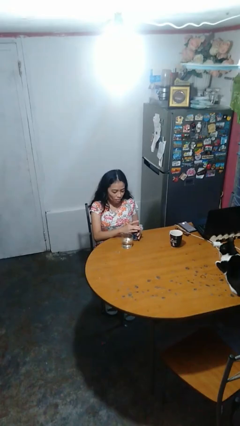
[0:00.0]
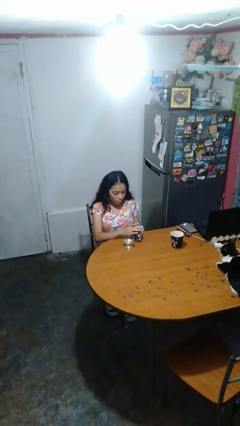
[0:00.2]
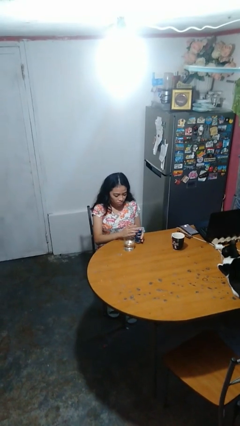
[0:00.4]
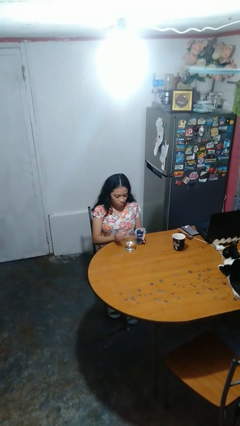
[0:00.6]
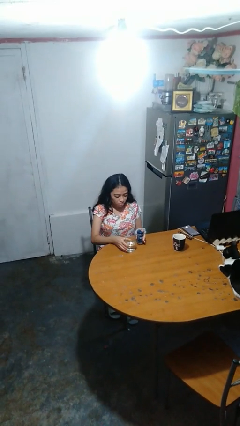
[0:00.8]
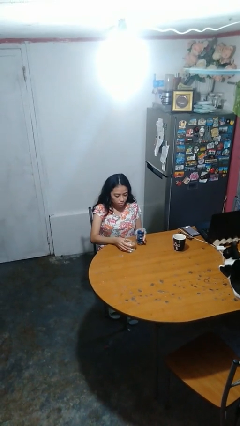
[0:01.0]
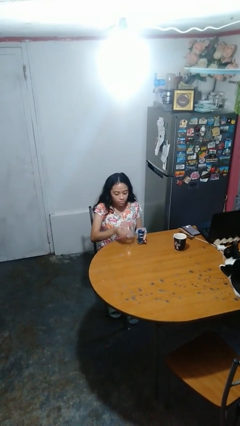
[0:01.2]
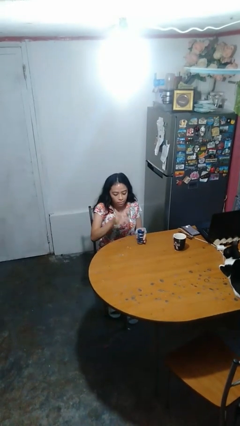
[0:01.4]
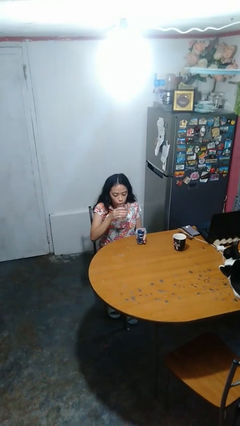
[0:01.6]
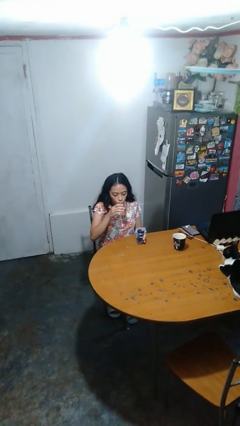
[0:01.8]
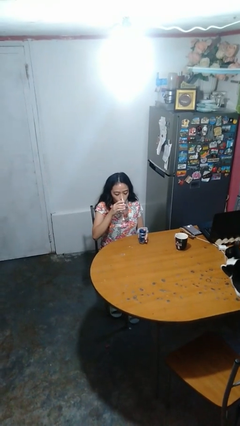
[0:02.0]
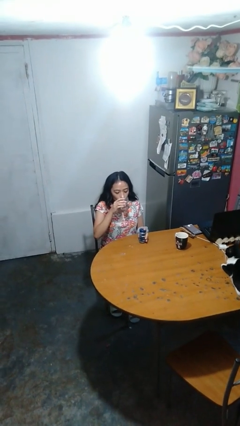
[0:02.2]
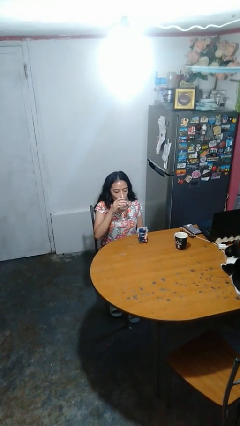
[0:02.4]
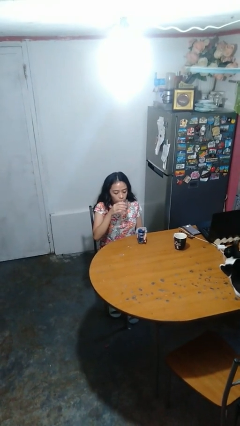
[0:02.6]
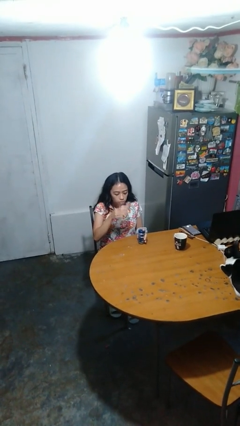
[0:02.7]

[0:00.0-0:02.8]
person drinks from cup

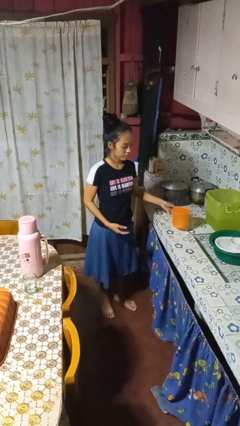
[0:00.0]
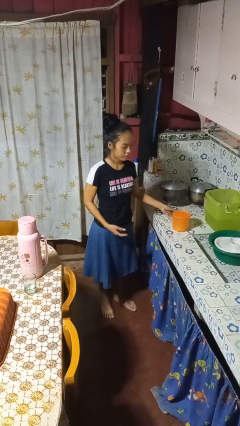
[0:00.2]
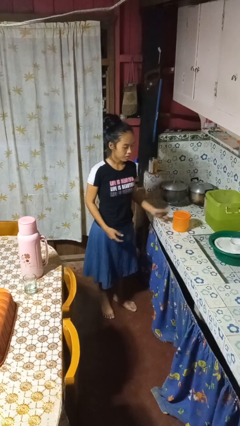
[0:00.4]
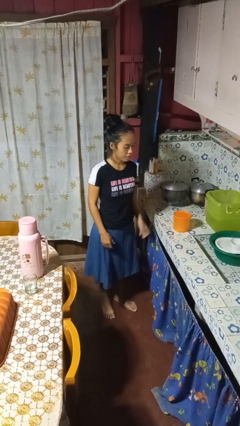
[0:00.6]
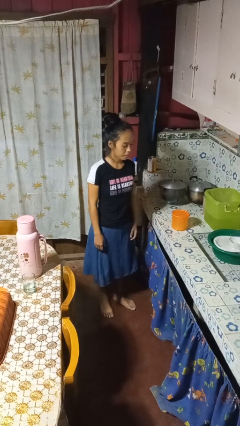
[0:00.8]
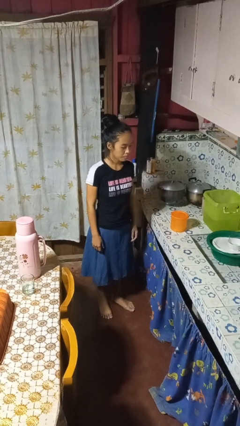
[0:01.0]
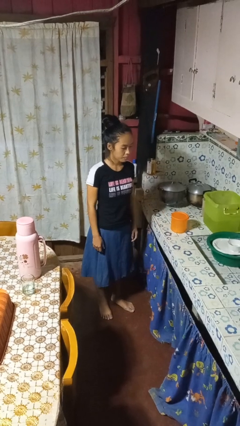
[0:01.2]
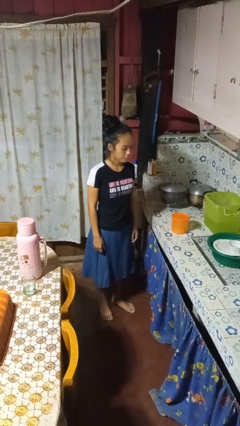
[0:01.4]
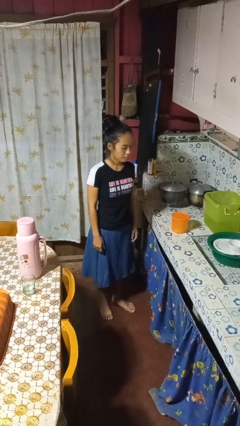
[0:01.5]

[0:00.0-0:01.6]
person puts down object on countertop

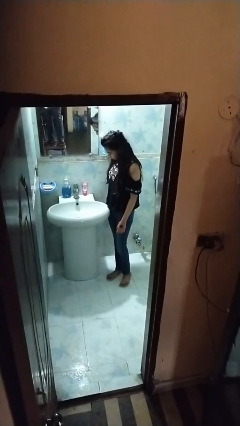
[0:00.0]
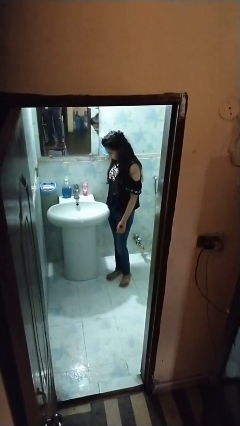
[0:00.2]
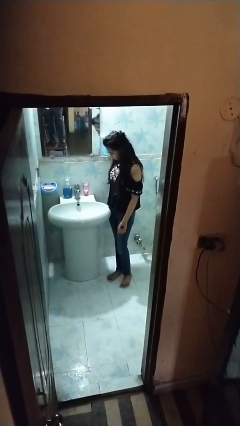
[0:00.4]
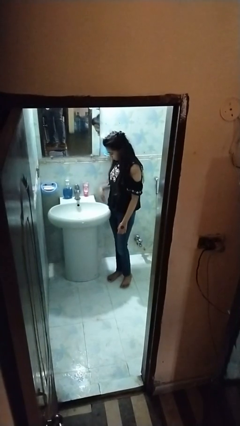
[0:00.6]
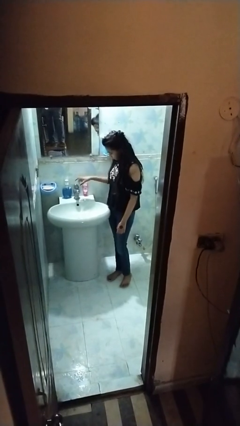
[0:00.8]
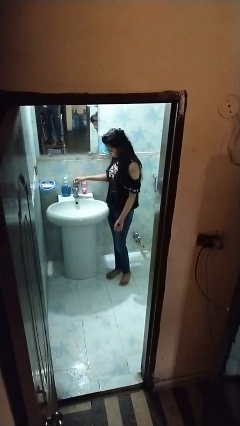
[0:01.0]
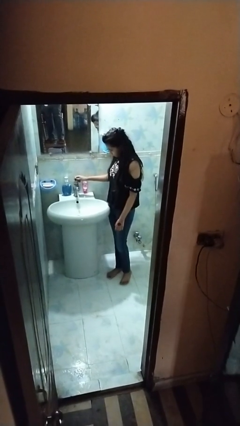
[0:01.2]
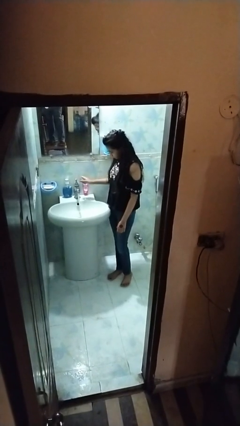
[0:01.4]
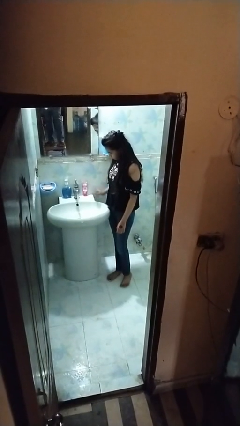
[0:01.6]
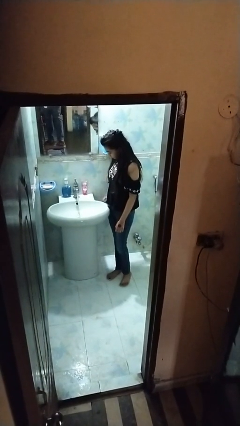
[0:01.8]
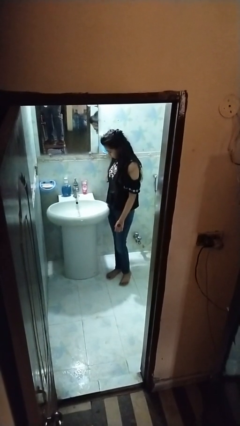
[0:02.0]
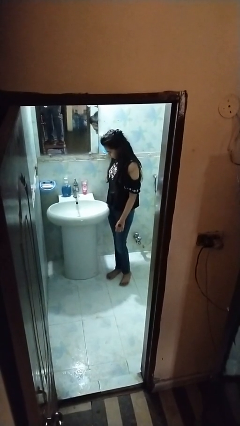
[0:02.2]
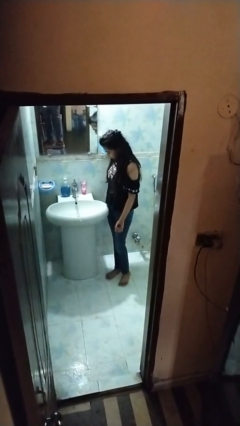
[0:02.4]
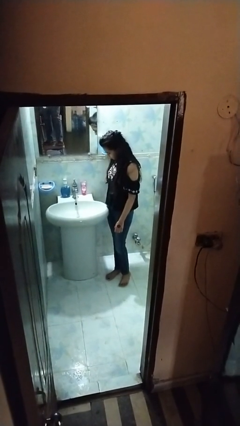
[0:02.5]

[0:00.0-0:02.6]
person turns on faucet

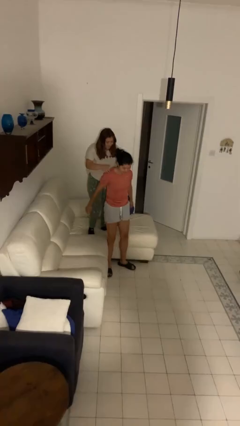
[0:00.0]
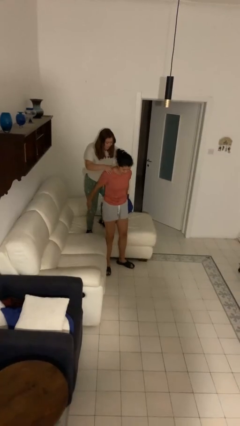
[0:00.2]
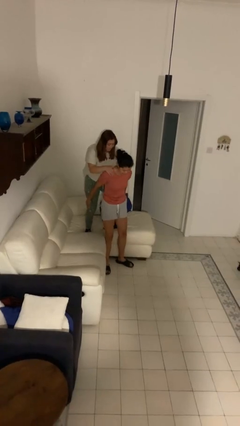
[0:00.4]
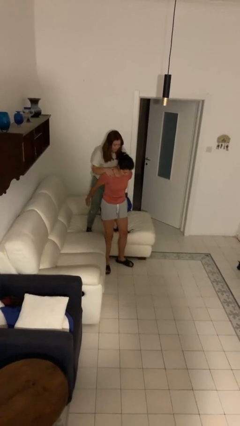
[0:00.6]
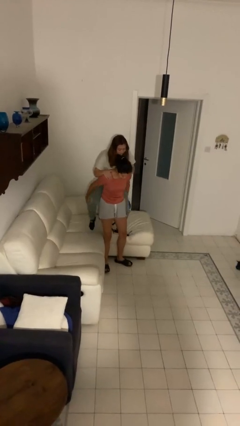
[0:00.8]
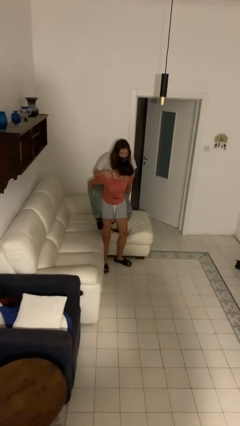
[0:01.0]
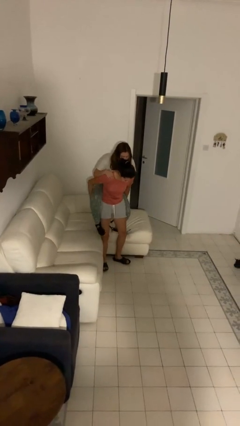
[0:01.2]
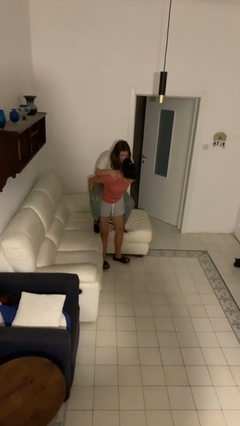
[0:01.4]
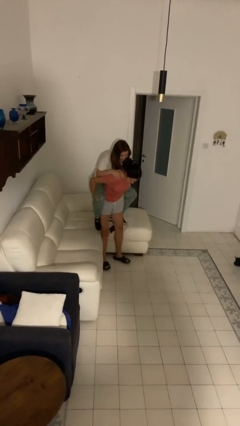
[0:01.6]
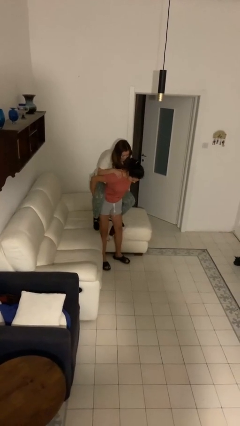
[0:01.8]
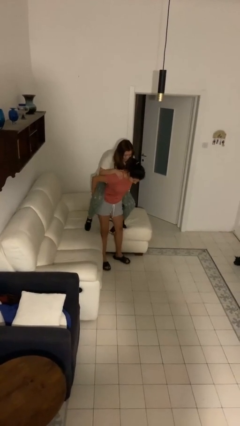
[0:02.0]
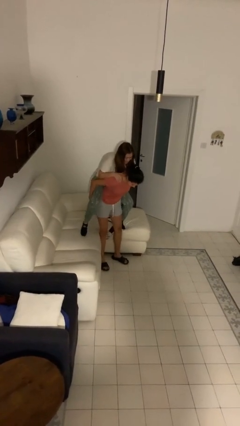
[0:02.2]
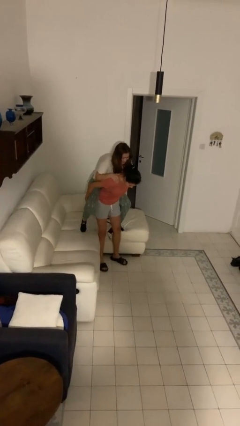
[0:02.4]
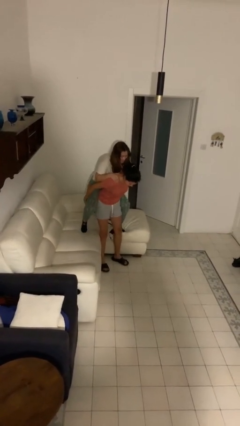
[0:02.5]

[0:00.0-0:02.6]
person carries person over shoulder

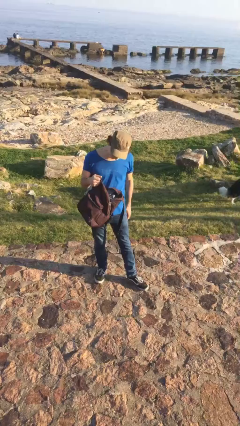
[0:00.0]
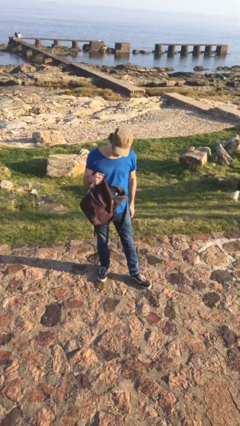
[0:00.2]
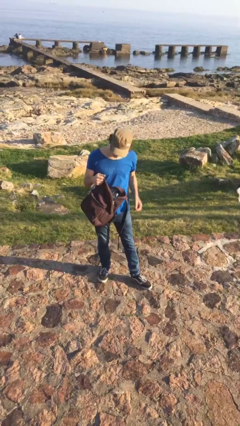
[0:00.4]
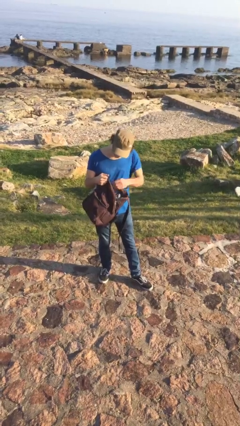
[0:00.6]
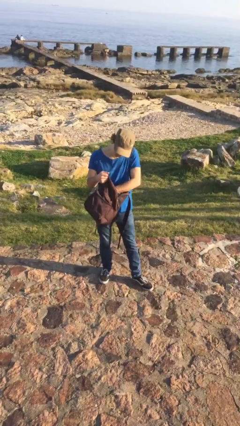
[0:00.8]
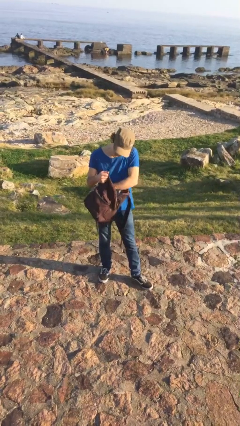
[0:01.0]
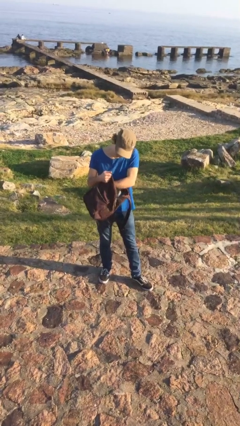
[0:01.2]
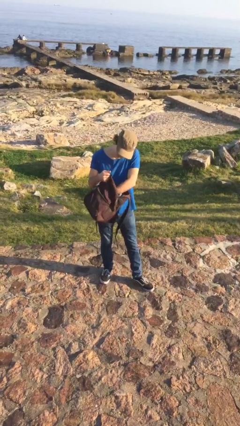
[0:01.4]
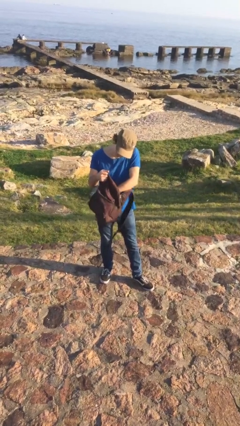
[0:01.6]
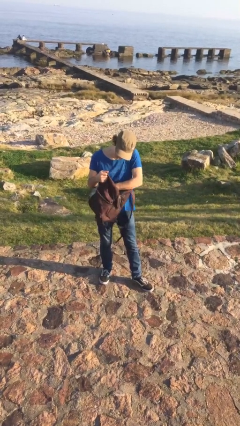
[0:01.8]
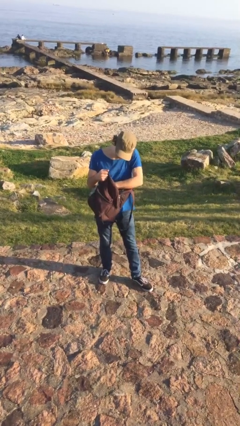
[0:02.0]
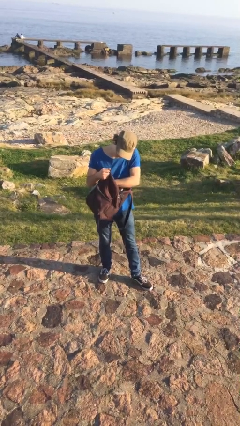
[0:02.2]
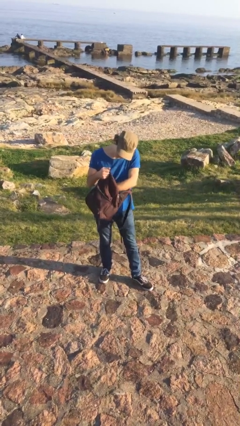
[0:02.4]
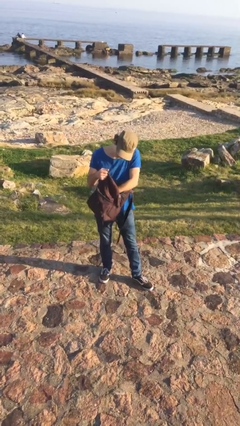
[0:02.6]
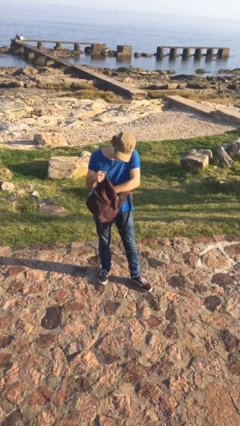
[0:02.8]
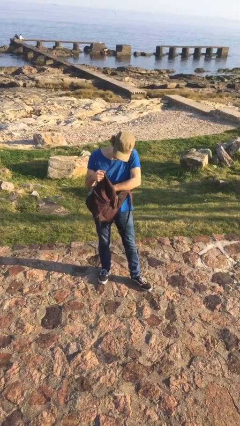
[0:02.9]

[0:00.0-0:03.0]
person searches in backpack

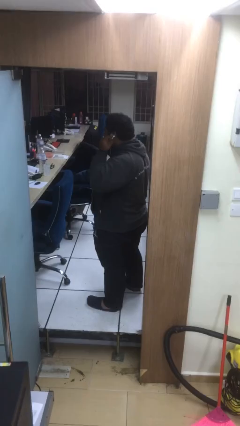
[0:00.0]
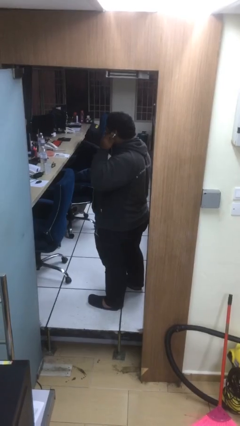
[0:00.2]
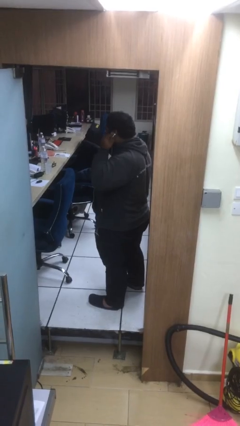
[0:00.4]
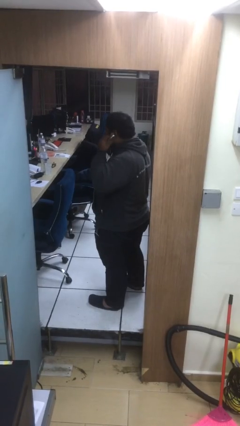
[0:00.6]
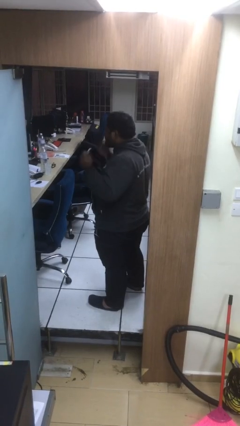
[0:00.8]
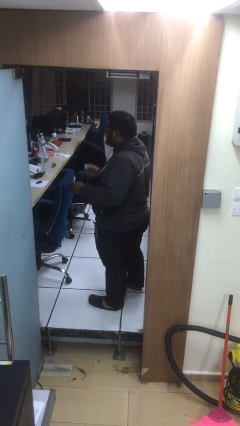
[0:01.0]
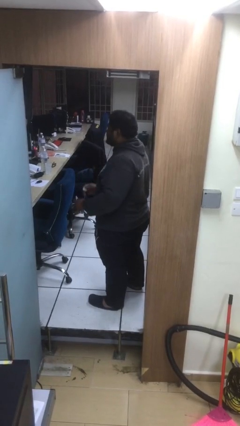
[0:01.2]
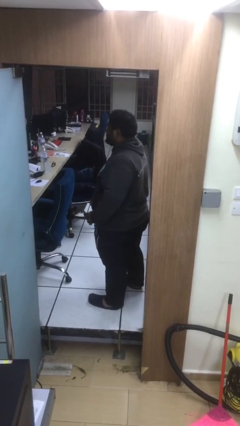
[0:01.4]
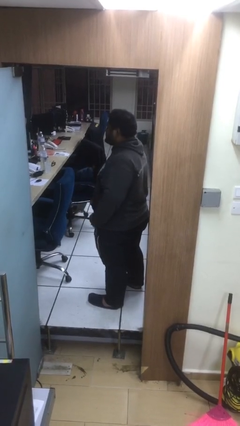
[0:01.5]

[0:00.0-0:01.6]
person takes off headphones

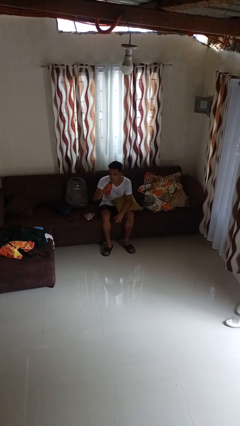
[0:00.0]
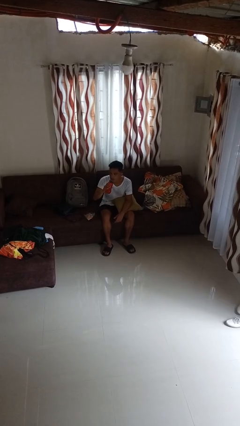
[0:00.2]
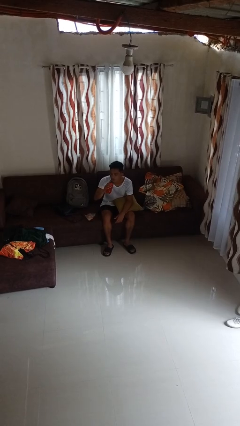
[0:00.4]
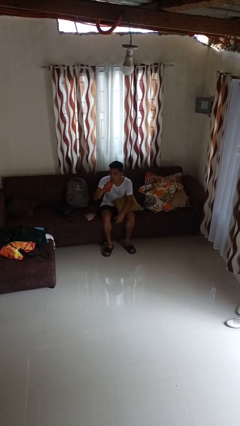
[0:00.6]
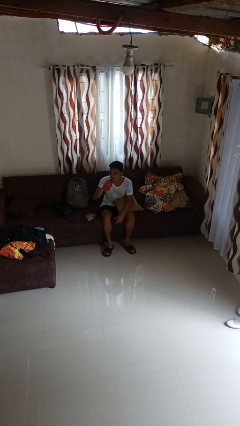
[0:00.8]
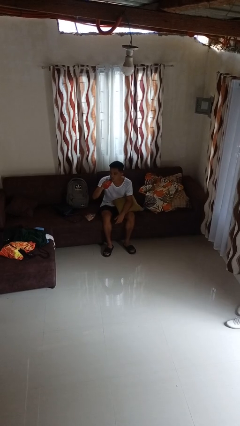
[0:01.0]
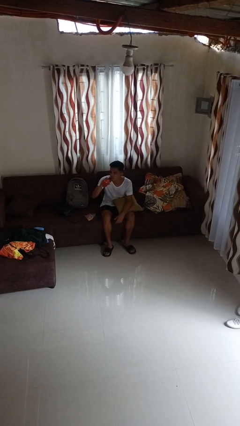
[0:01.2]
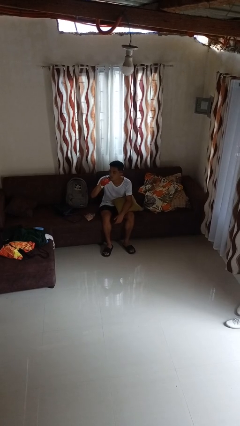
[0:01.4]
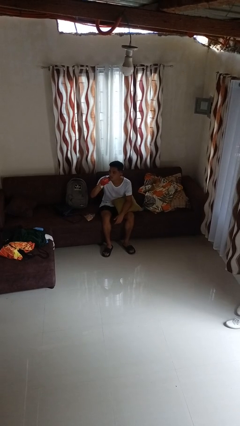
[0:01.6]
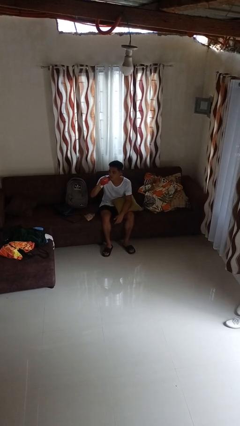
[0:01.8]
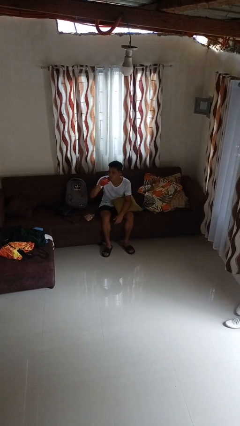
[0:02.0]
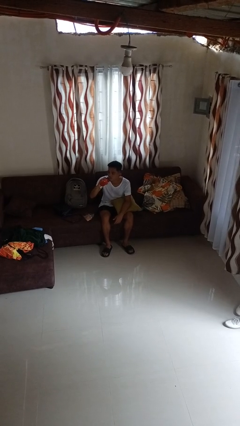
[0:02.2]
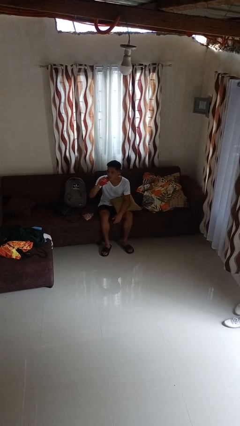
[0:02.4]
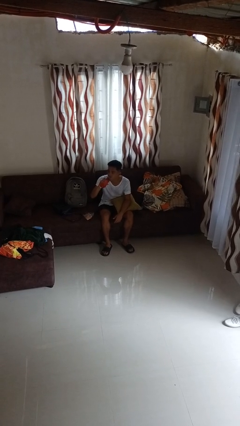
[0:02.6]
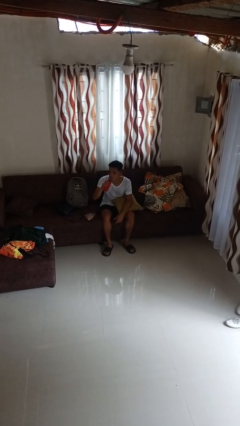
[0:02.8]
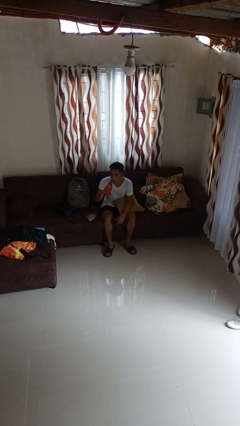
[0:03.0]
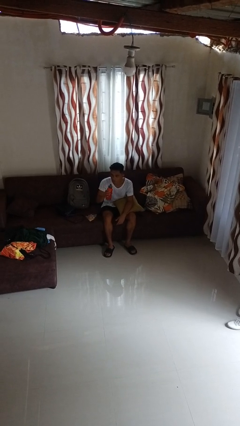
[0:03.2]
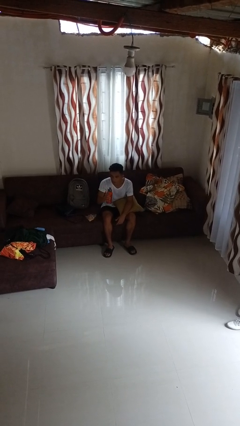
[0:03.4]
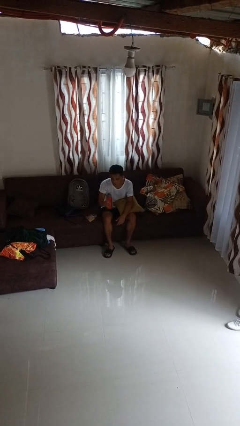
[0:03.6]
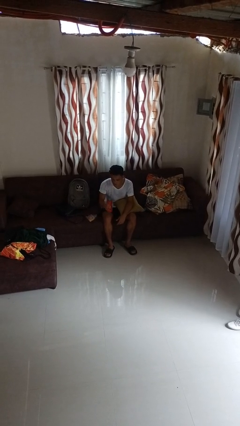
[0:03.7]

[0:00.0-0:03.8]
person drinks from bottle
